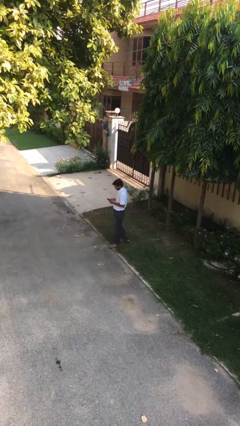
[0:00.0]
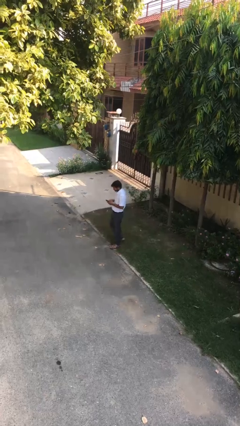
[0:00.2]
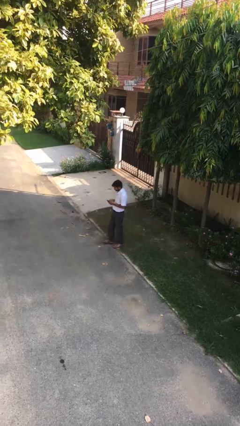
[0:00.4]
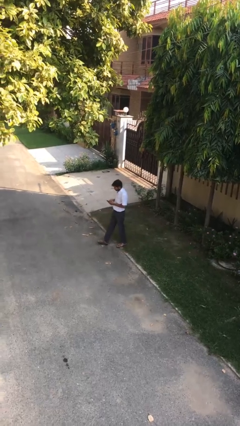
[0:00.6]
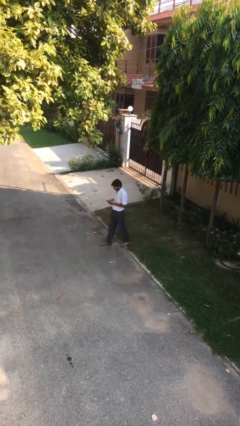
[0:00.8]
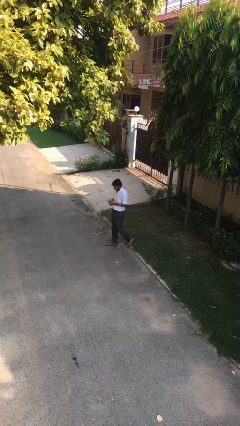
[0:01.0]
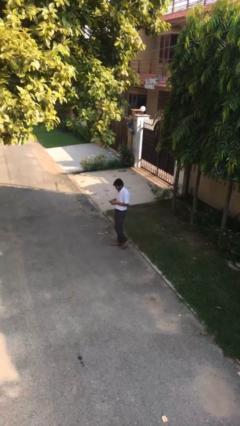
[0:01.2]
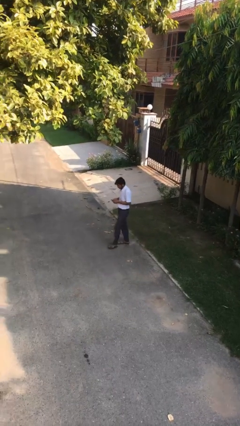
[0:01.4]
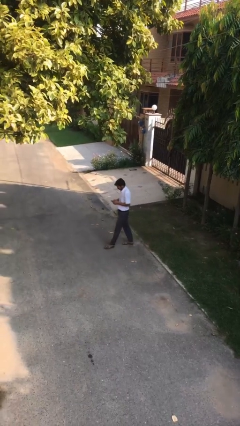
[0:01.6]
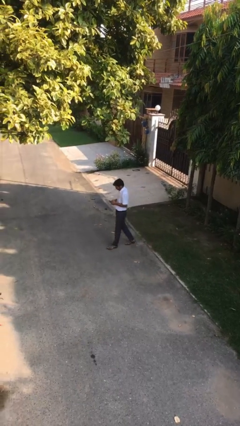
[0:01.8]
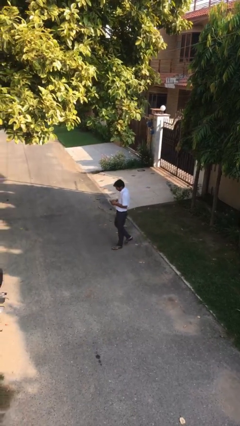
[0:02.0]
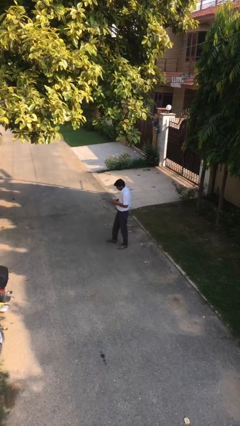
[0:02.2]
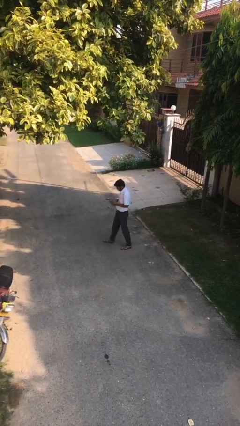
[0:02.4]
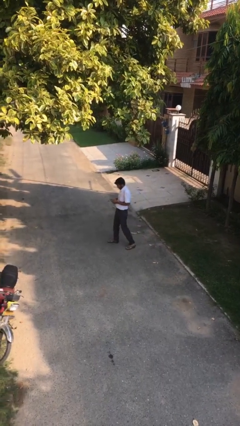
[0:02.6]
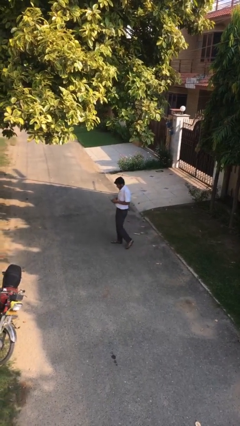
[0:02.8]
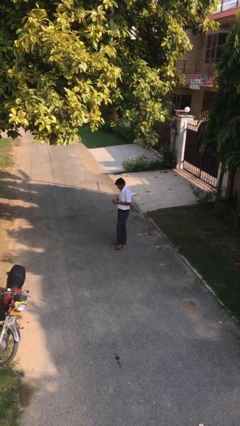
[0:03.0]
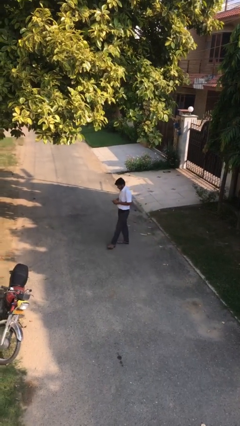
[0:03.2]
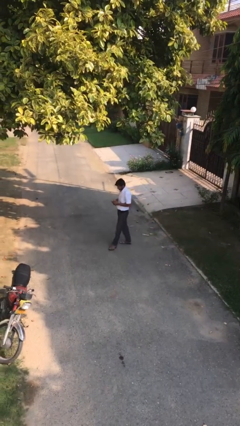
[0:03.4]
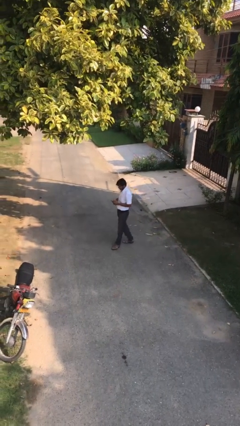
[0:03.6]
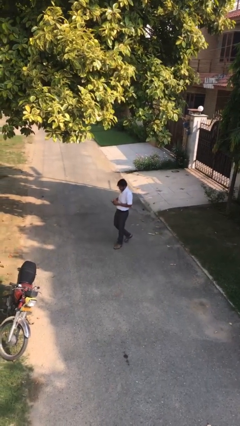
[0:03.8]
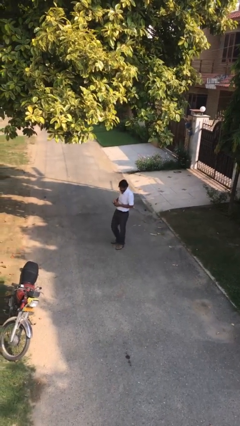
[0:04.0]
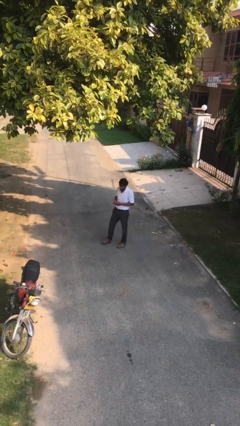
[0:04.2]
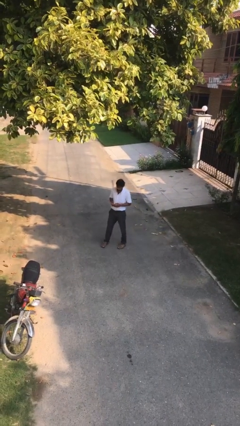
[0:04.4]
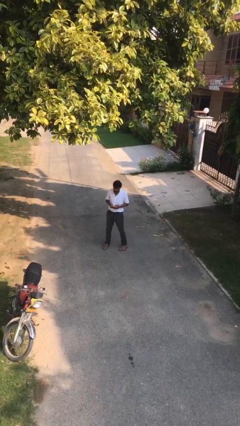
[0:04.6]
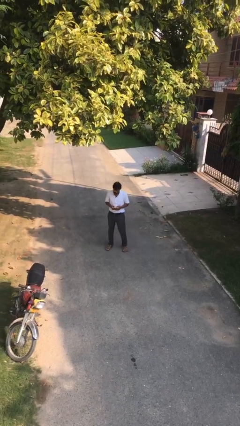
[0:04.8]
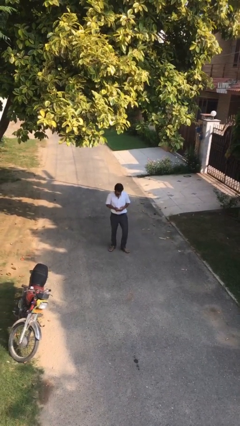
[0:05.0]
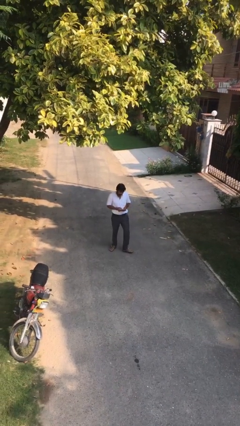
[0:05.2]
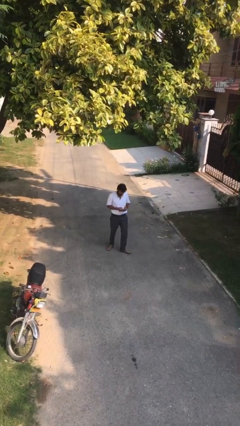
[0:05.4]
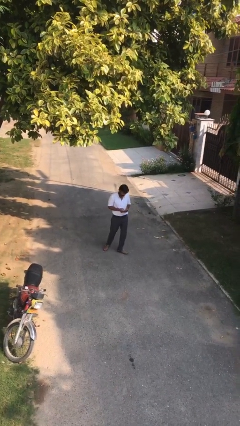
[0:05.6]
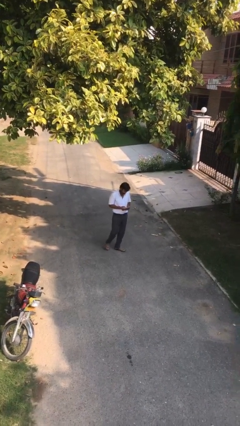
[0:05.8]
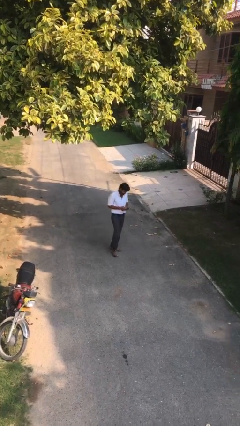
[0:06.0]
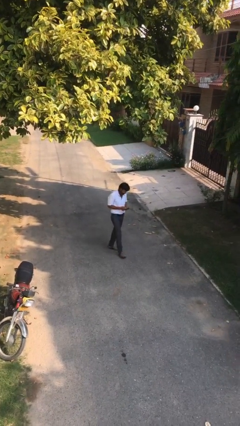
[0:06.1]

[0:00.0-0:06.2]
person texts on phone

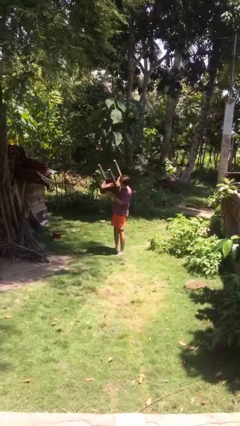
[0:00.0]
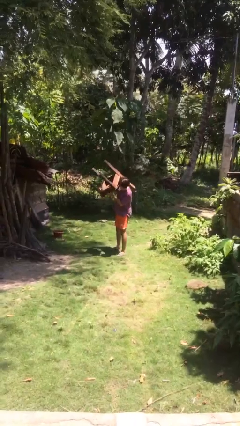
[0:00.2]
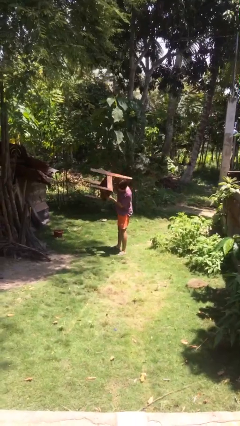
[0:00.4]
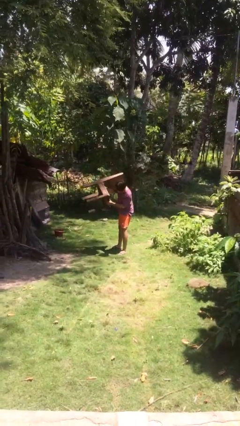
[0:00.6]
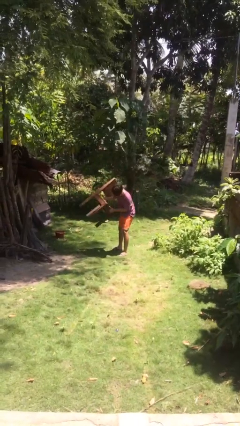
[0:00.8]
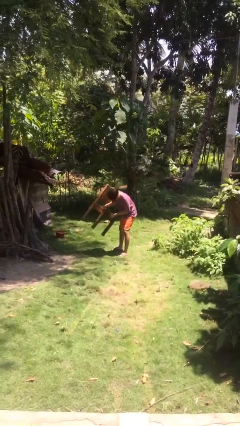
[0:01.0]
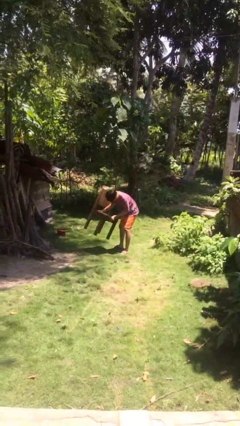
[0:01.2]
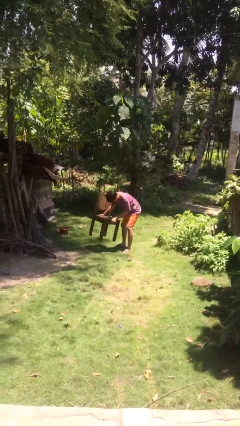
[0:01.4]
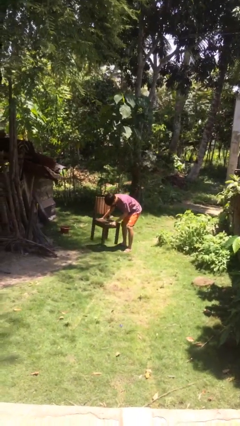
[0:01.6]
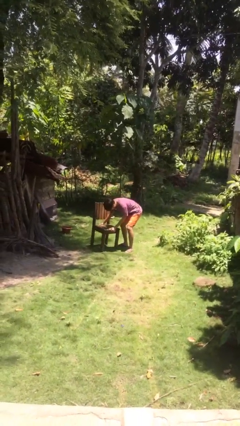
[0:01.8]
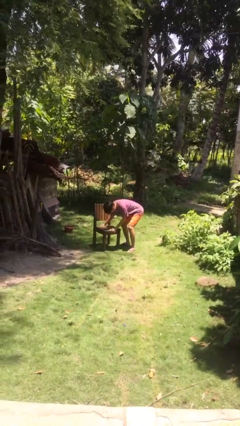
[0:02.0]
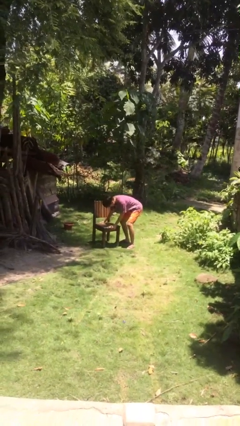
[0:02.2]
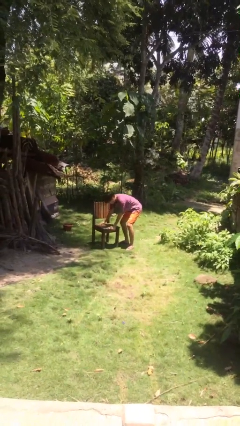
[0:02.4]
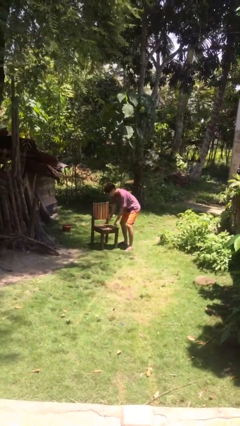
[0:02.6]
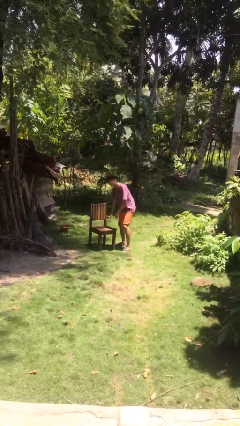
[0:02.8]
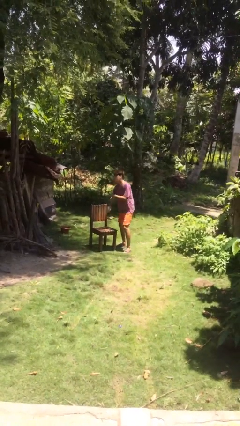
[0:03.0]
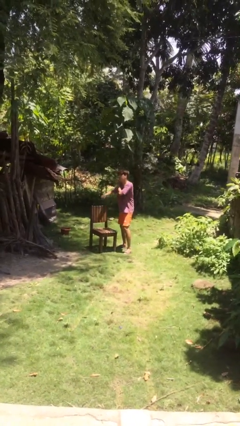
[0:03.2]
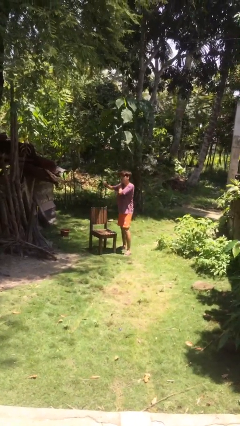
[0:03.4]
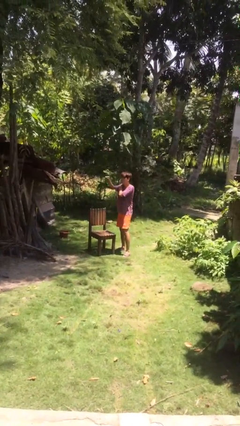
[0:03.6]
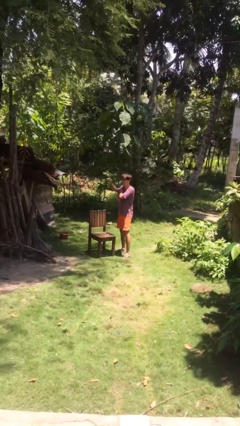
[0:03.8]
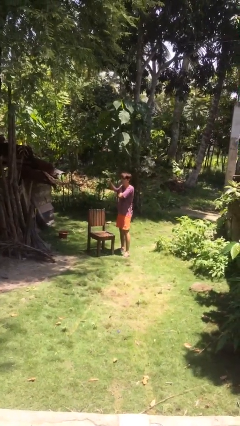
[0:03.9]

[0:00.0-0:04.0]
person puts down object on floor

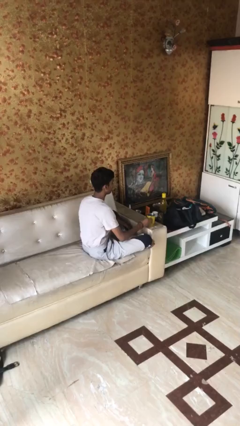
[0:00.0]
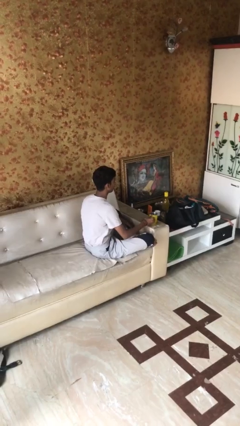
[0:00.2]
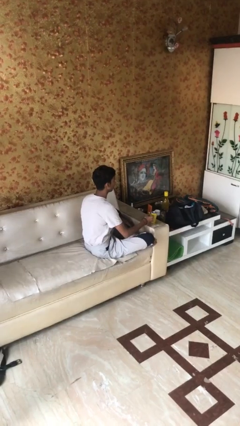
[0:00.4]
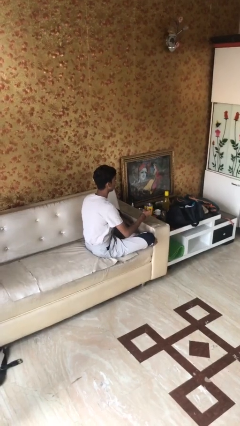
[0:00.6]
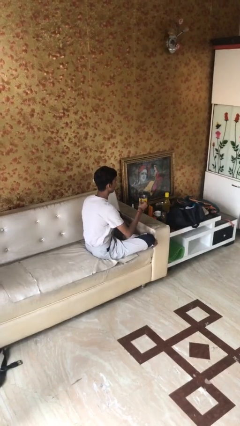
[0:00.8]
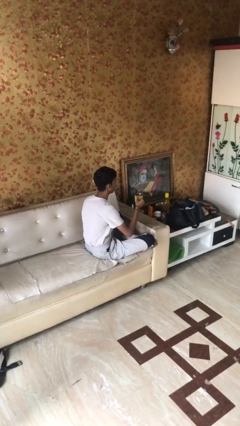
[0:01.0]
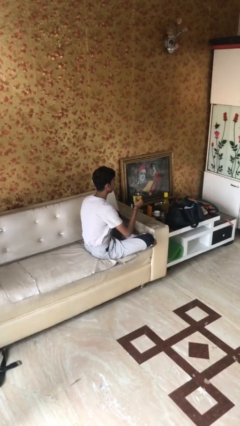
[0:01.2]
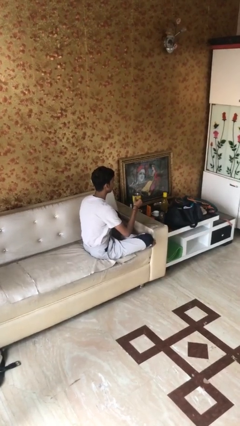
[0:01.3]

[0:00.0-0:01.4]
person picks up object from table

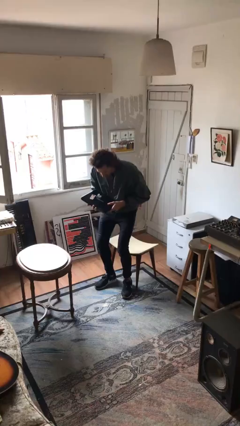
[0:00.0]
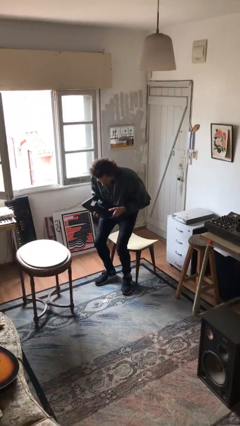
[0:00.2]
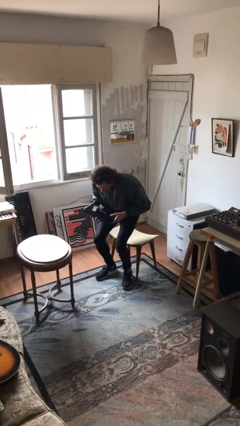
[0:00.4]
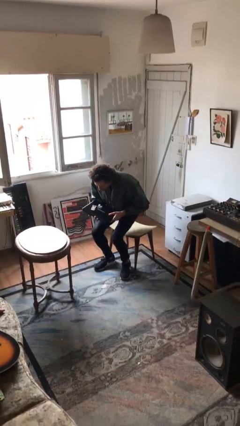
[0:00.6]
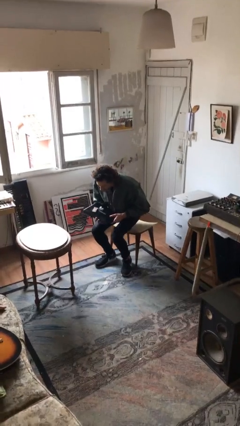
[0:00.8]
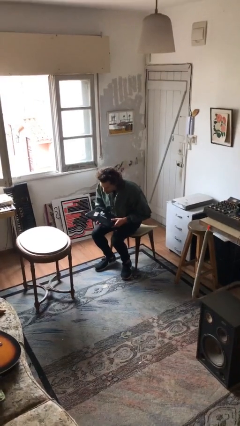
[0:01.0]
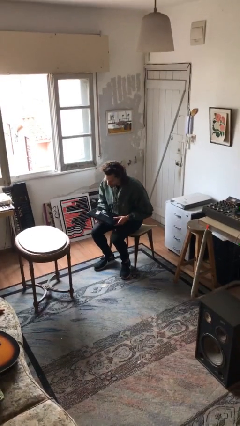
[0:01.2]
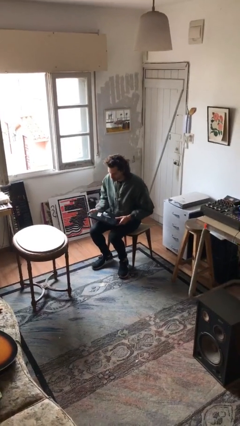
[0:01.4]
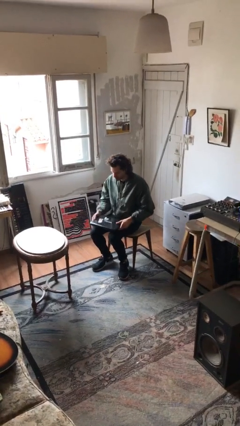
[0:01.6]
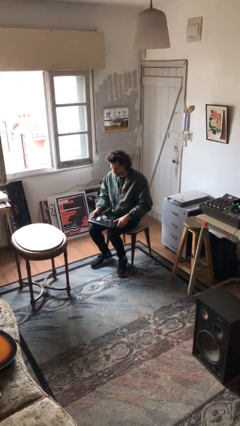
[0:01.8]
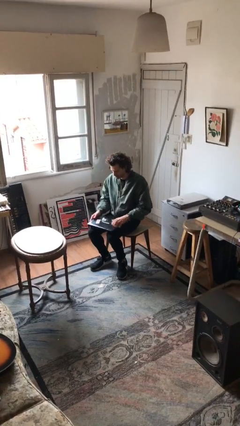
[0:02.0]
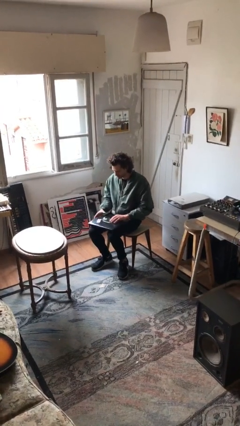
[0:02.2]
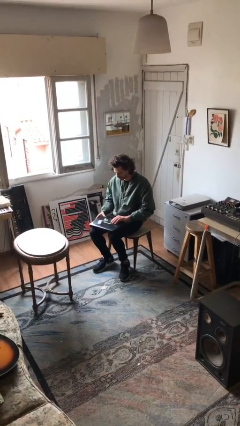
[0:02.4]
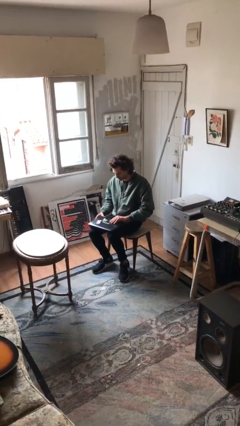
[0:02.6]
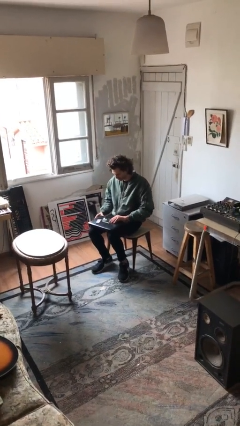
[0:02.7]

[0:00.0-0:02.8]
person sits down

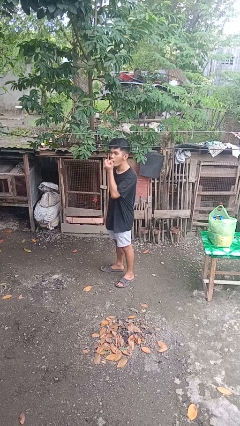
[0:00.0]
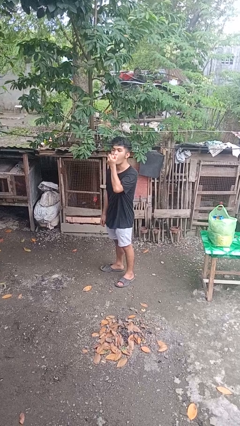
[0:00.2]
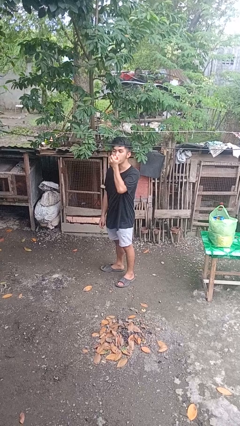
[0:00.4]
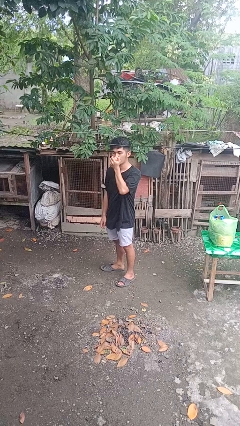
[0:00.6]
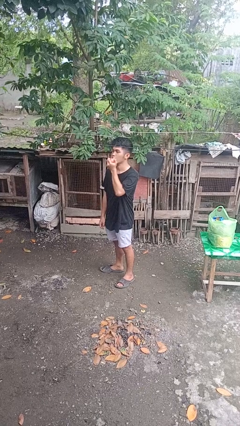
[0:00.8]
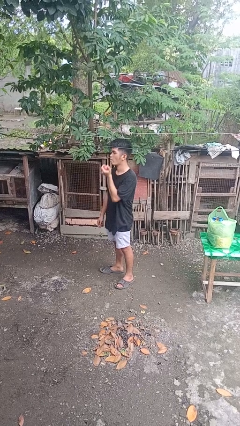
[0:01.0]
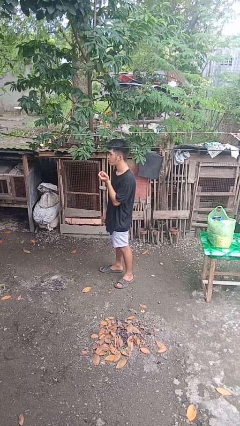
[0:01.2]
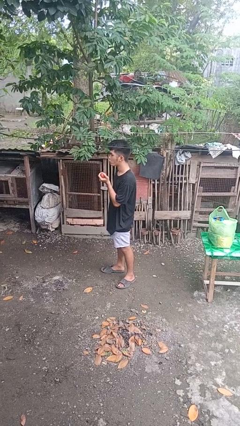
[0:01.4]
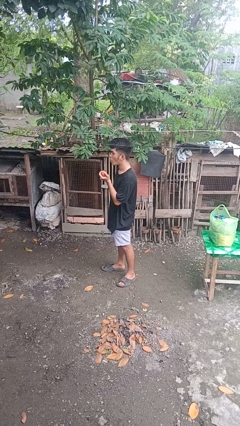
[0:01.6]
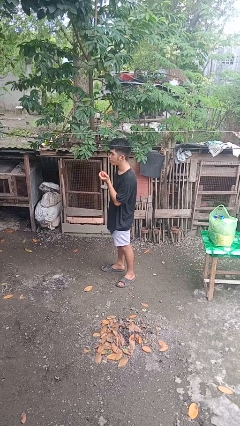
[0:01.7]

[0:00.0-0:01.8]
person eats apple

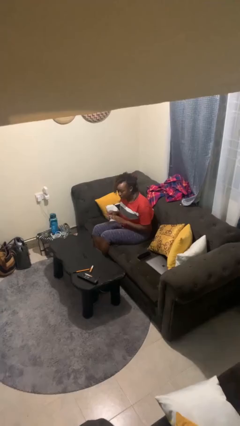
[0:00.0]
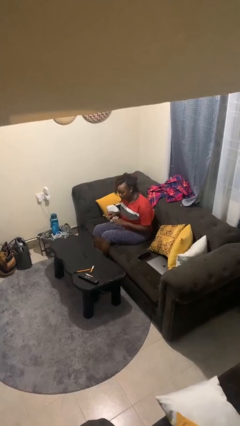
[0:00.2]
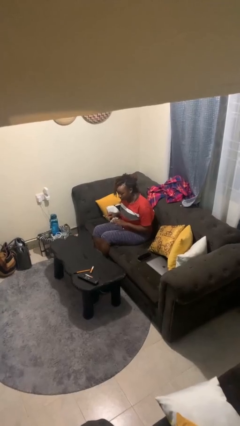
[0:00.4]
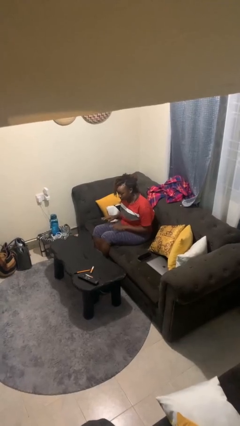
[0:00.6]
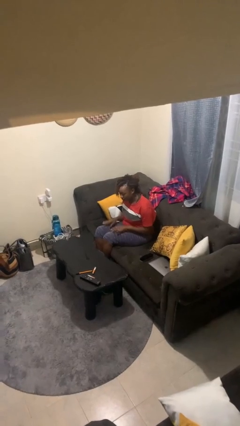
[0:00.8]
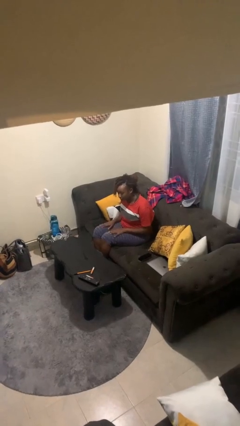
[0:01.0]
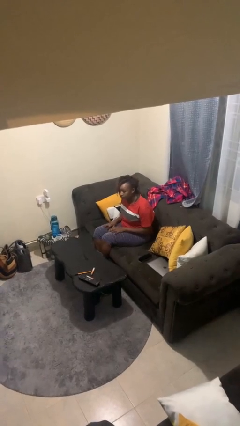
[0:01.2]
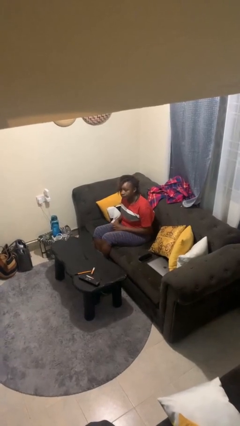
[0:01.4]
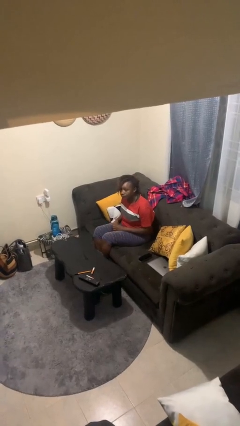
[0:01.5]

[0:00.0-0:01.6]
person slaps hands on thighs
